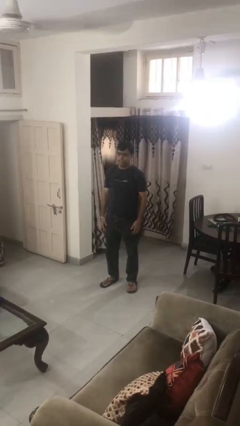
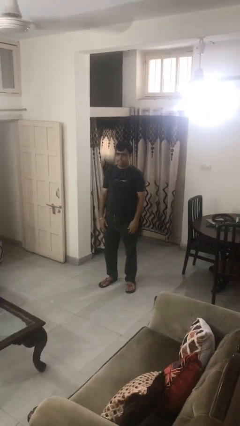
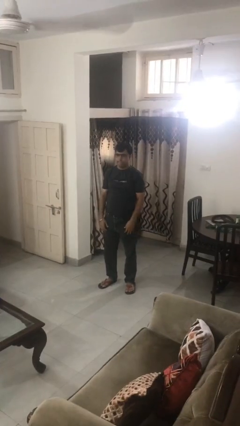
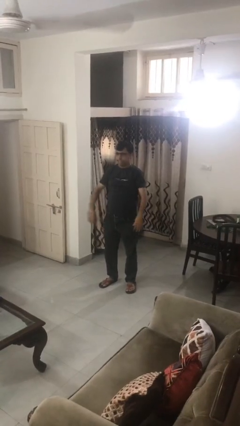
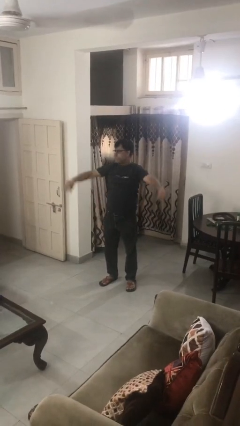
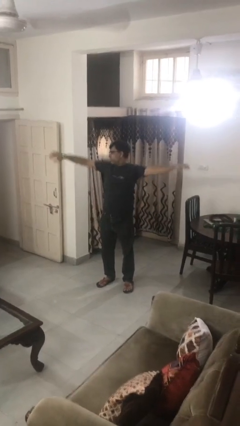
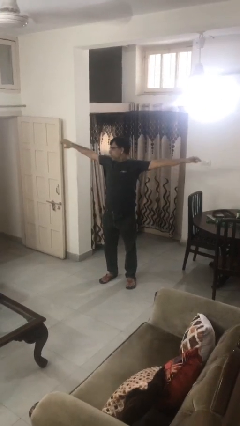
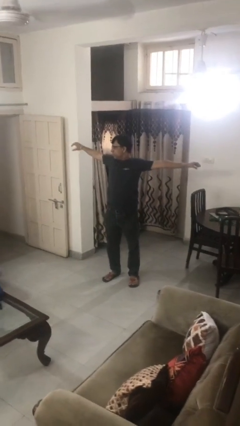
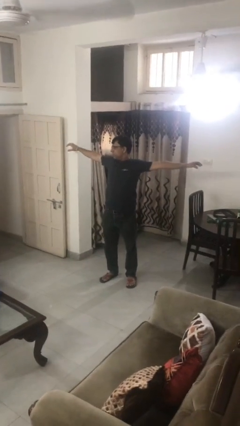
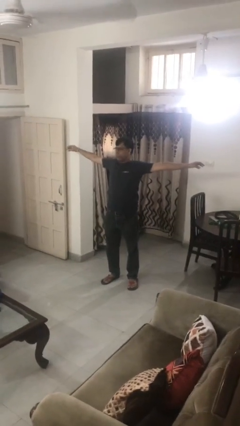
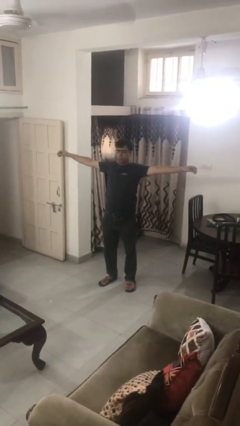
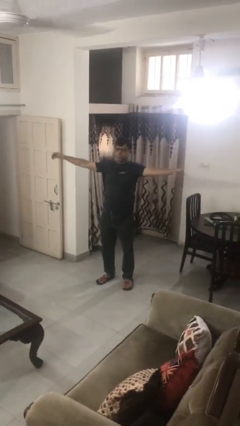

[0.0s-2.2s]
person stretches arms to side

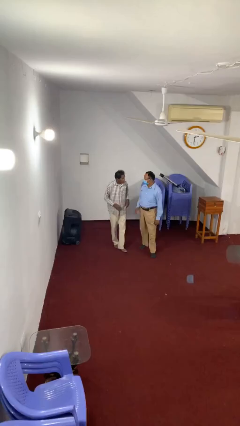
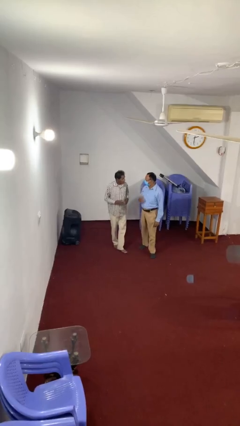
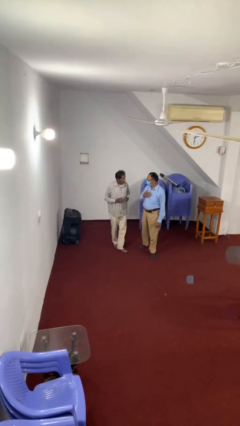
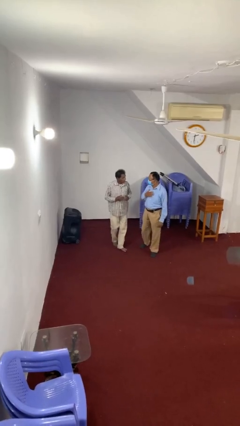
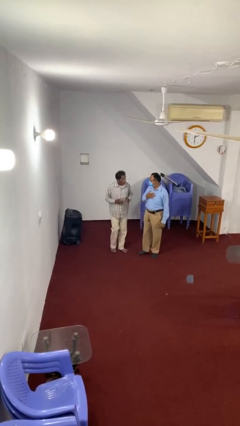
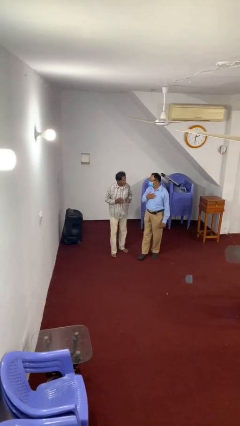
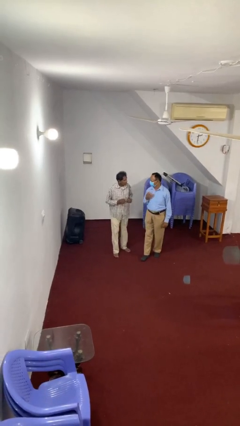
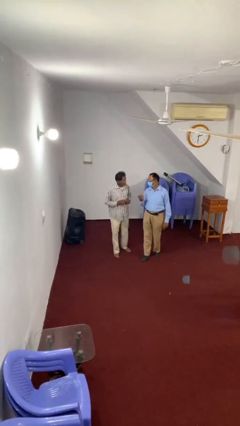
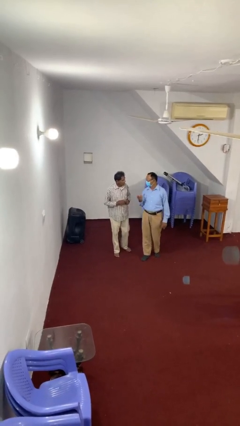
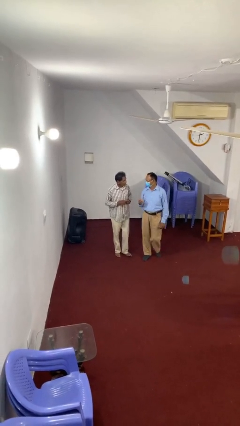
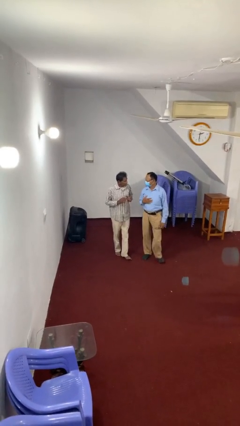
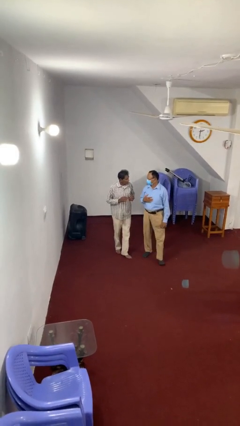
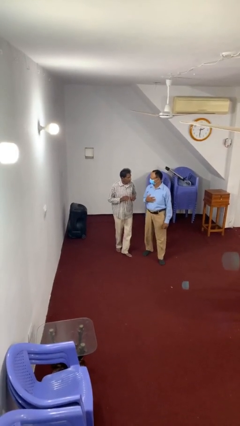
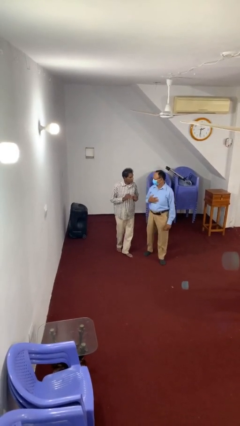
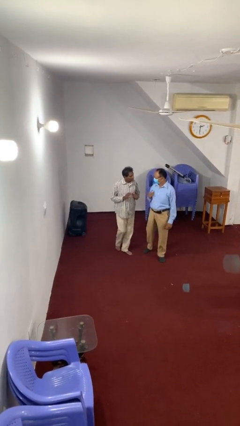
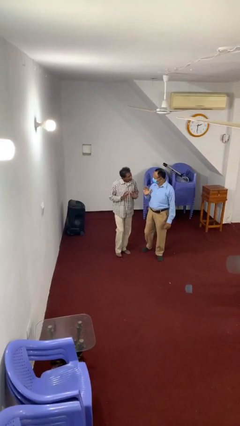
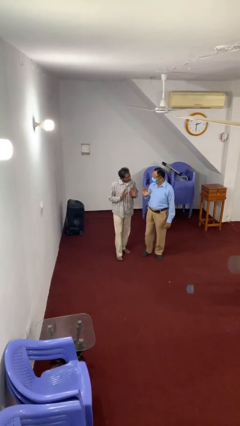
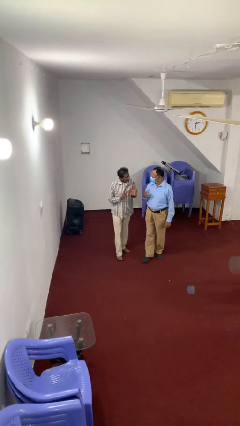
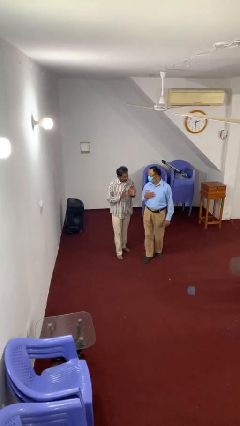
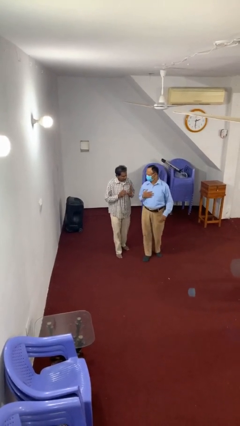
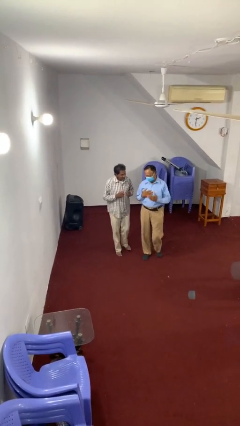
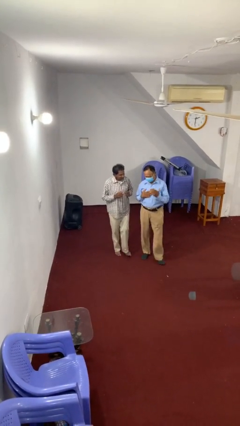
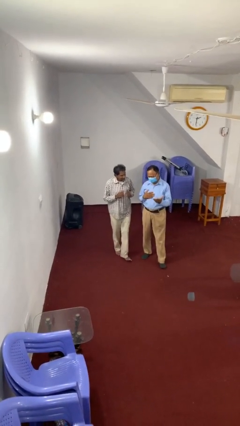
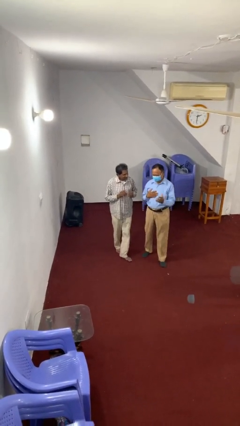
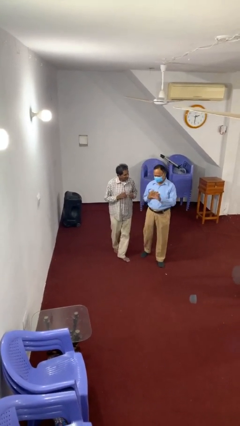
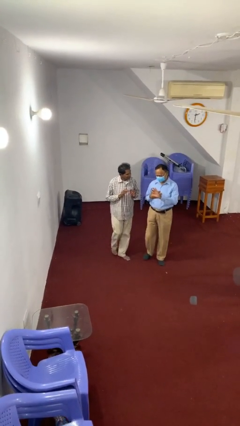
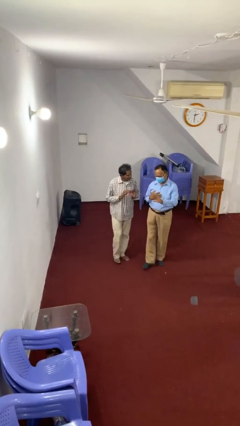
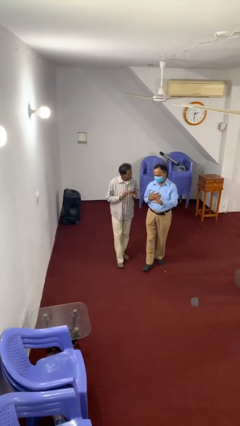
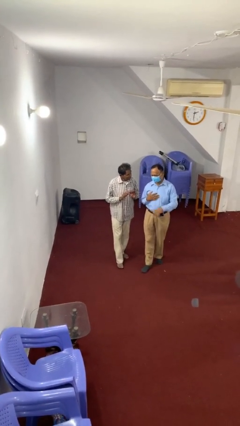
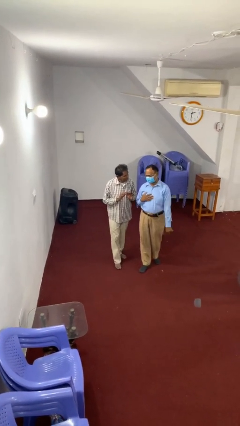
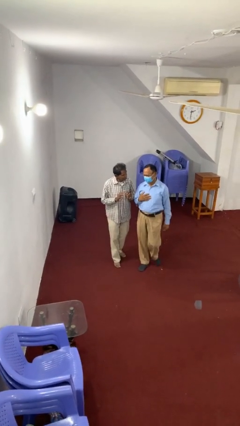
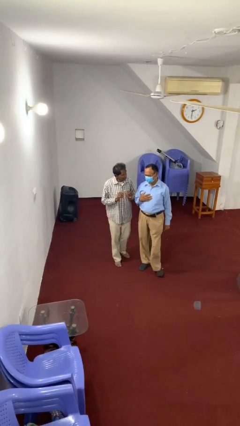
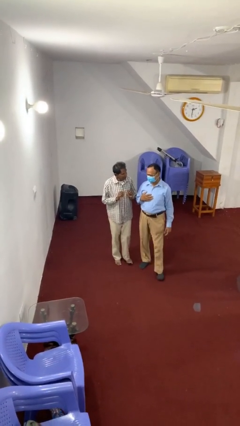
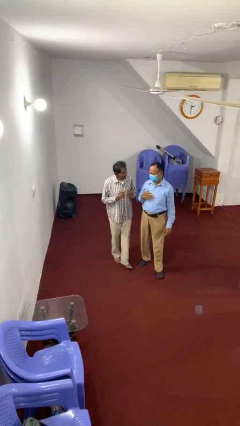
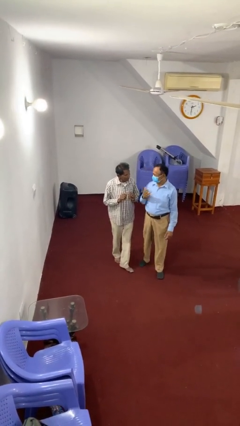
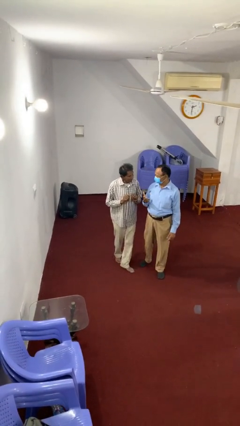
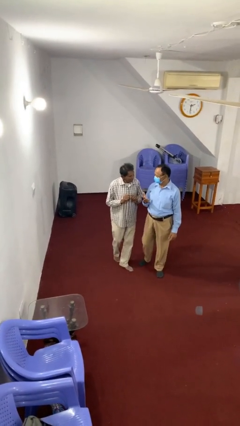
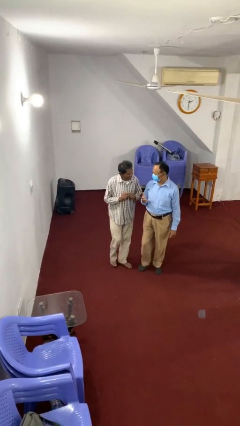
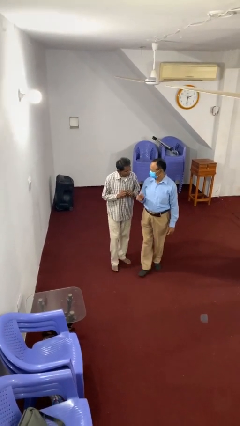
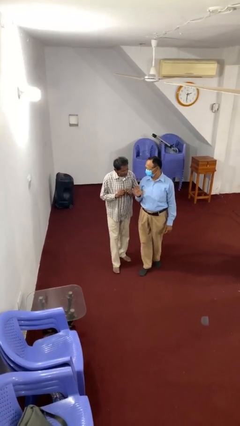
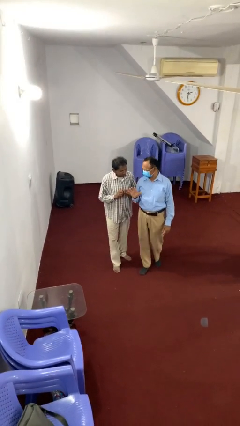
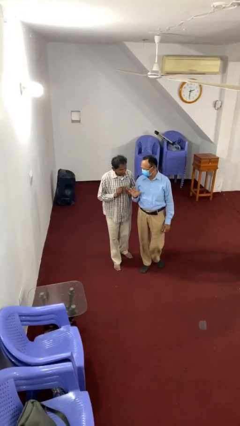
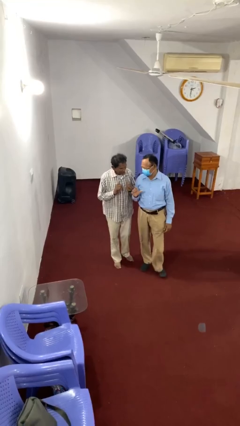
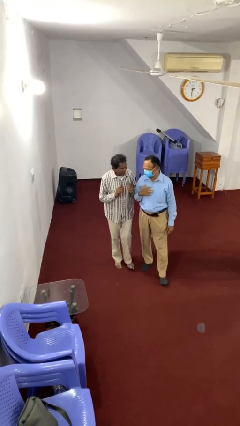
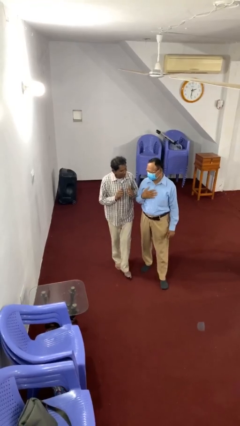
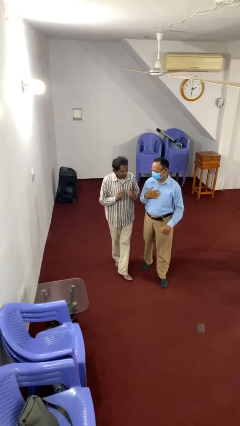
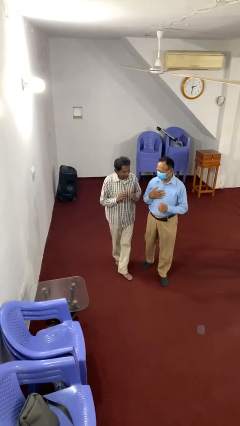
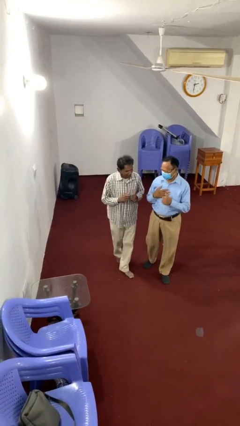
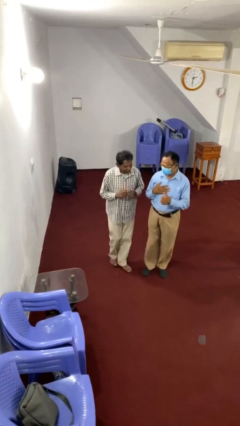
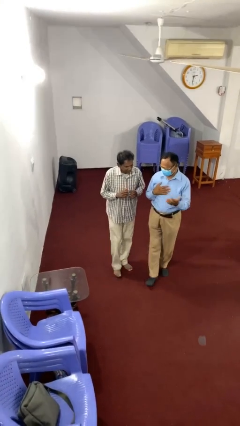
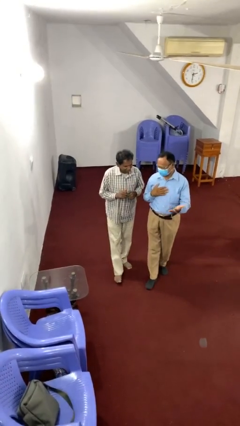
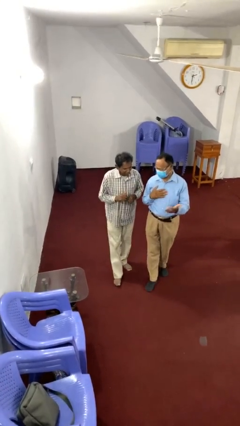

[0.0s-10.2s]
person talks to person

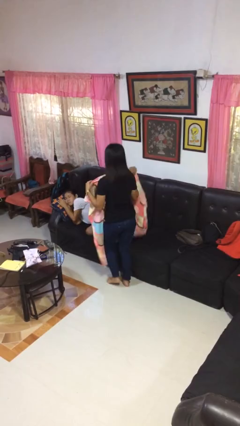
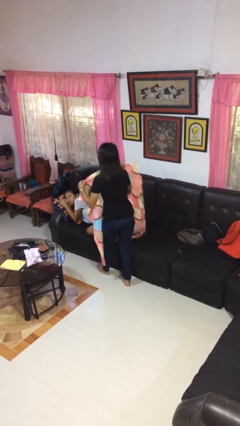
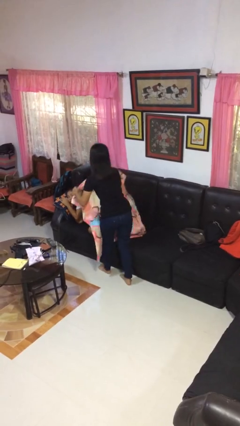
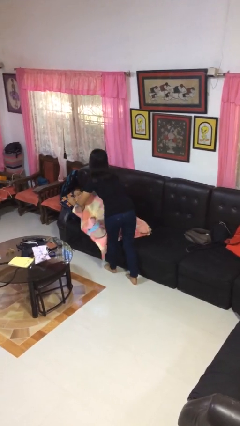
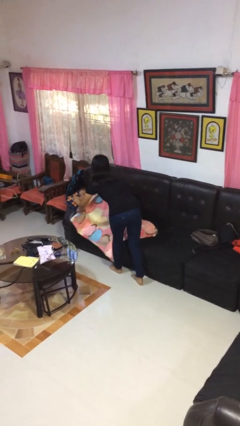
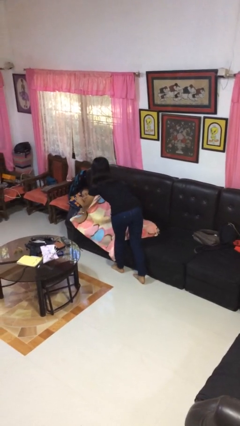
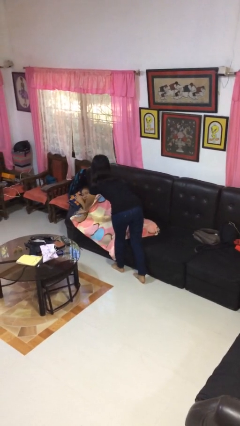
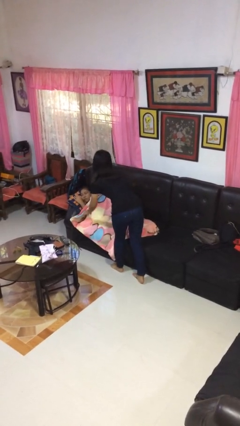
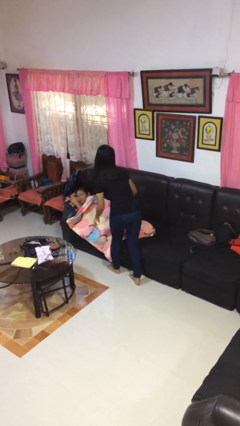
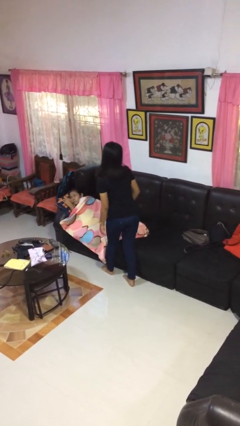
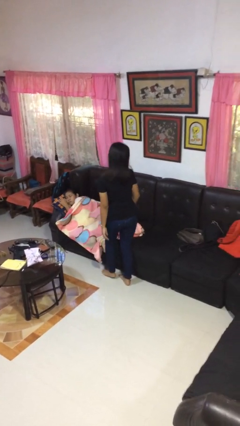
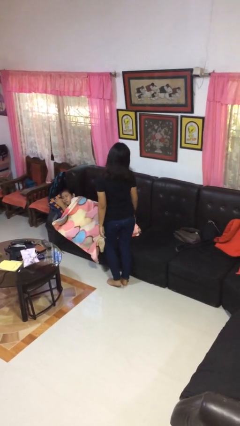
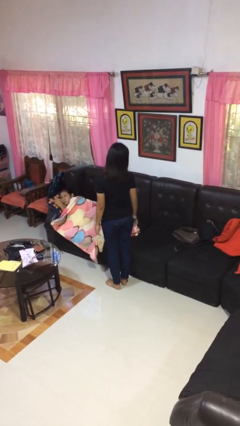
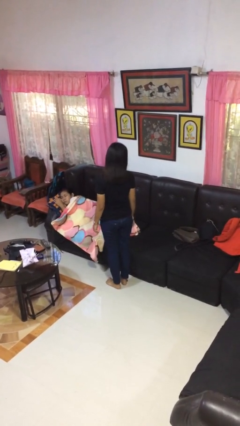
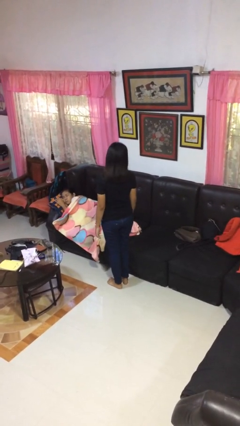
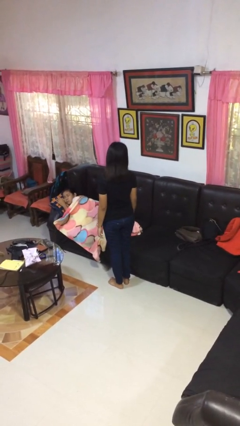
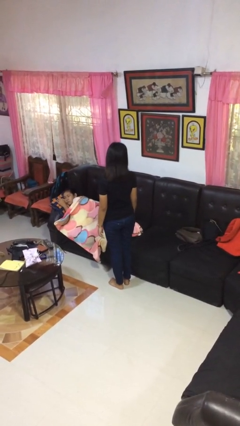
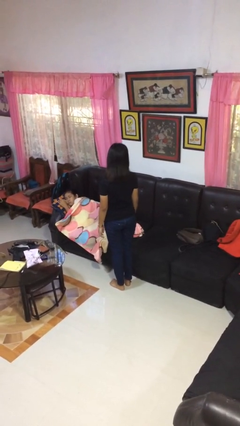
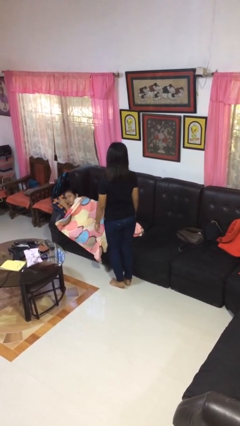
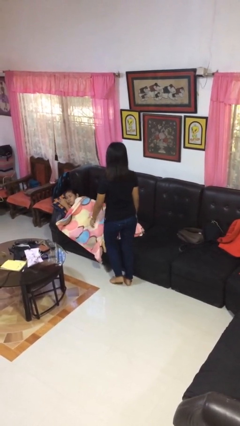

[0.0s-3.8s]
person covers friend with blanket

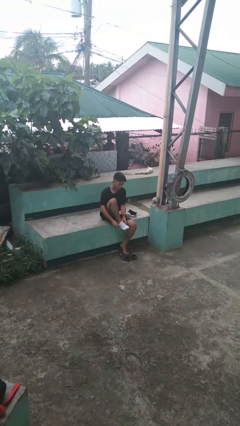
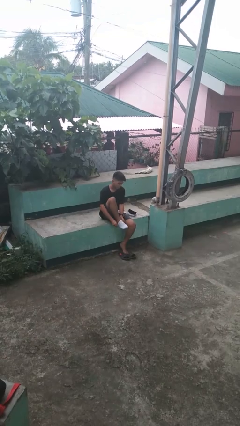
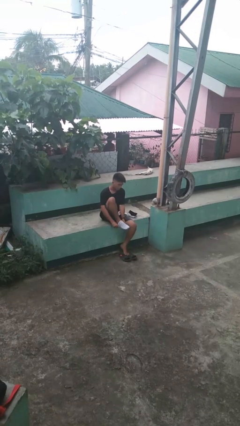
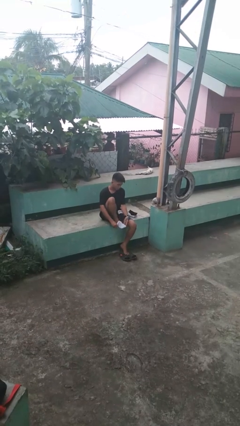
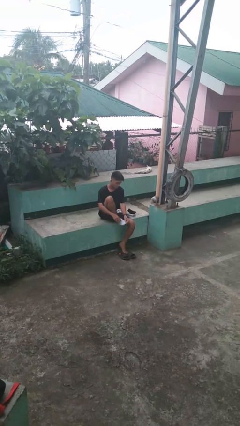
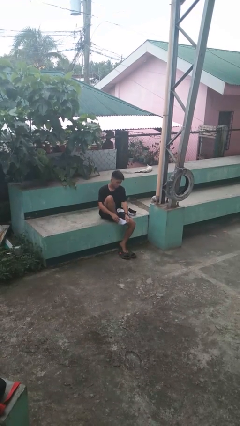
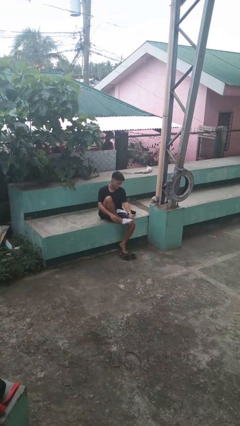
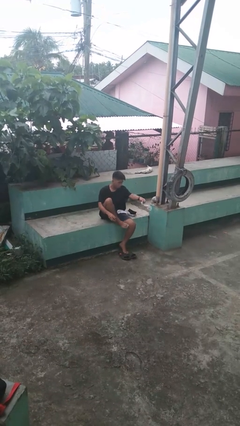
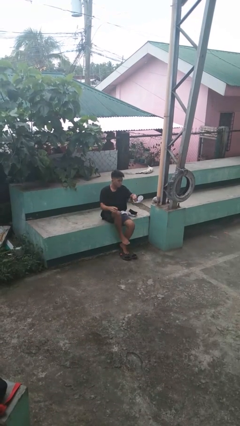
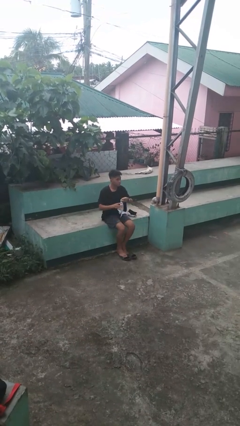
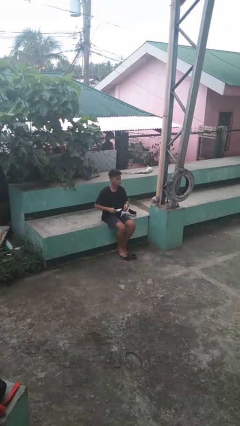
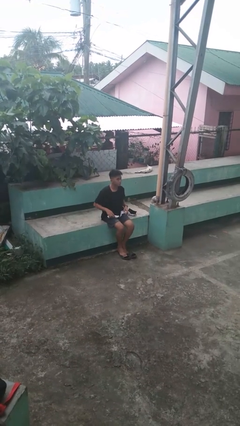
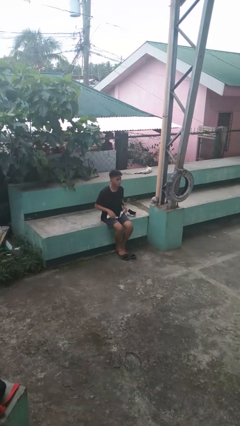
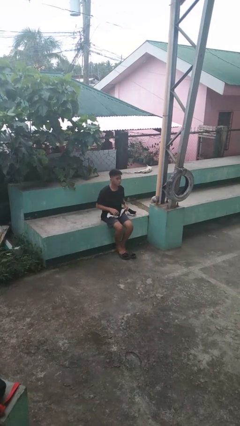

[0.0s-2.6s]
person takes off socks
